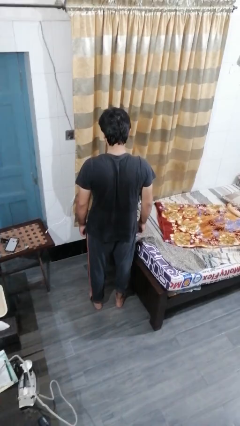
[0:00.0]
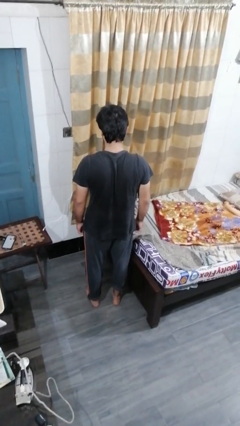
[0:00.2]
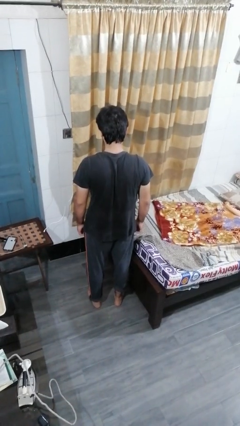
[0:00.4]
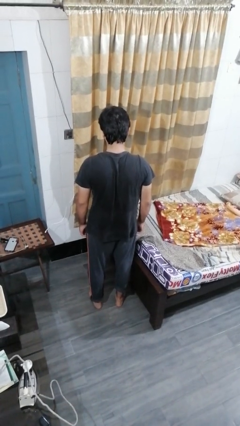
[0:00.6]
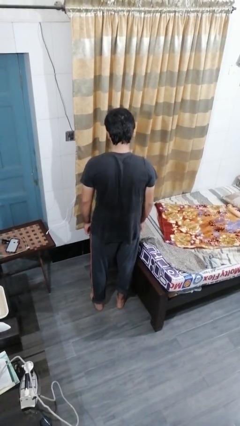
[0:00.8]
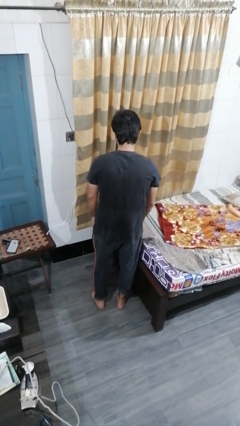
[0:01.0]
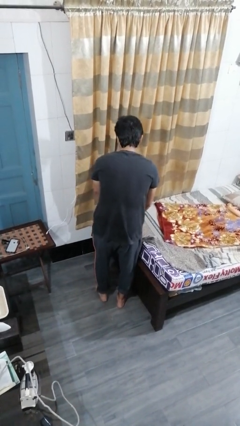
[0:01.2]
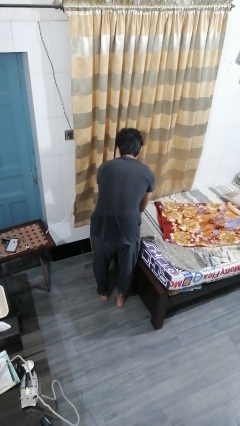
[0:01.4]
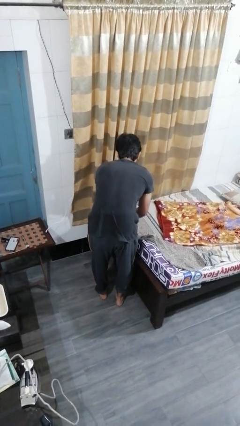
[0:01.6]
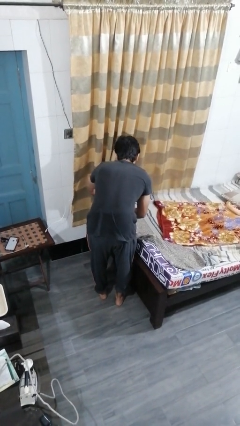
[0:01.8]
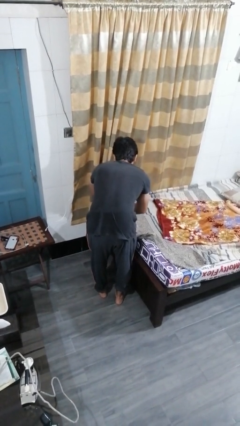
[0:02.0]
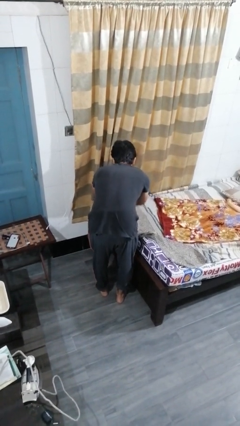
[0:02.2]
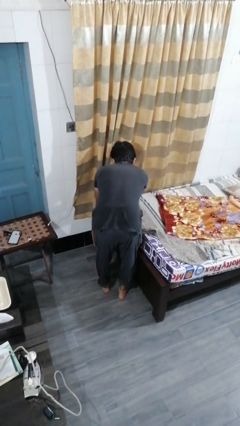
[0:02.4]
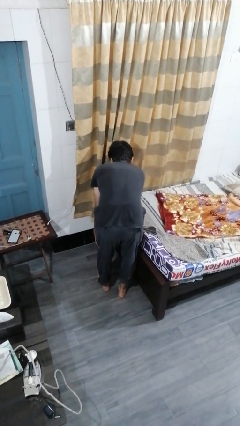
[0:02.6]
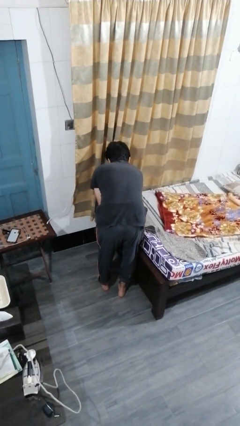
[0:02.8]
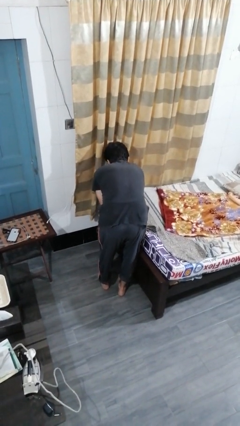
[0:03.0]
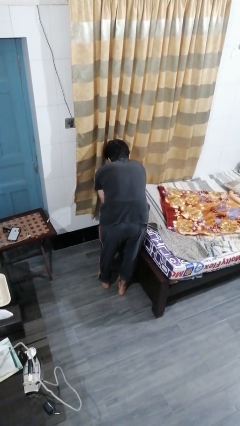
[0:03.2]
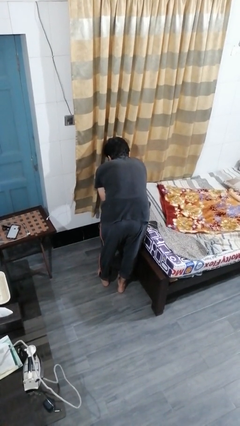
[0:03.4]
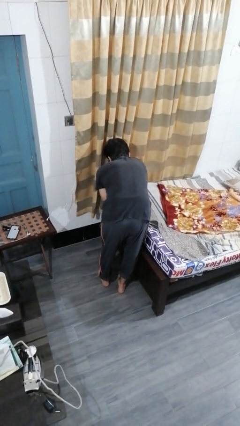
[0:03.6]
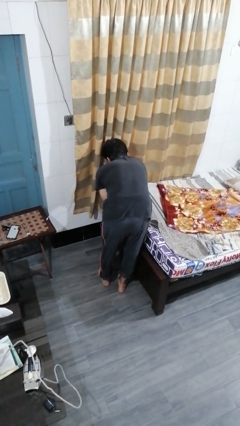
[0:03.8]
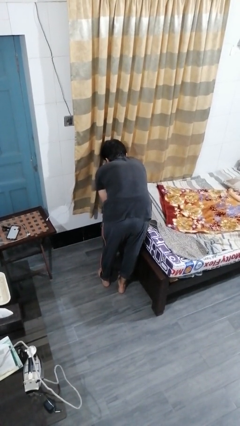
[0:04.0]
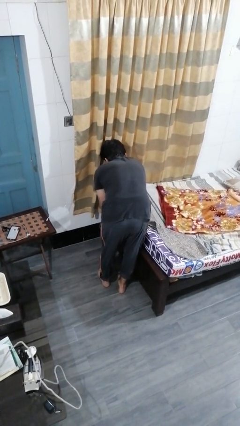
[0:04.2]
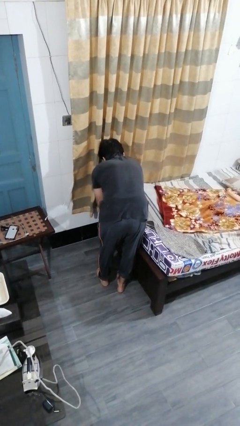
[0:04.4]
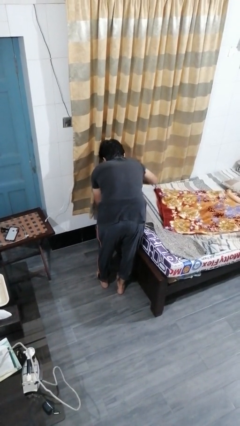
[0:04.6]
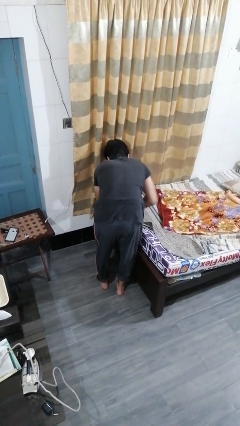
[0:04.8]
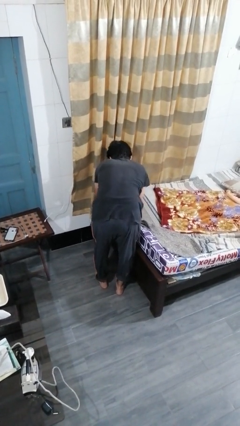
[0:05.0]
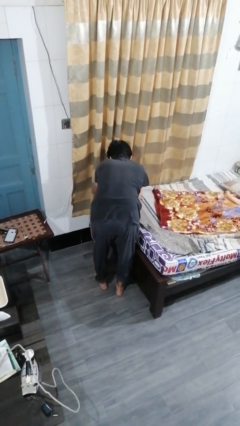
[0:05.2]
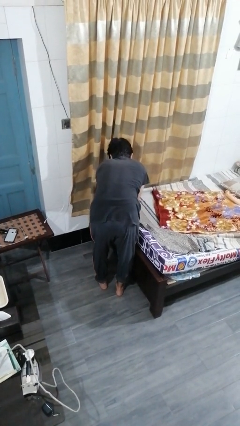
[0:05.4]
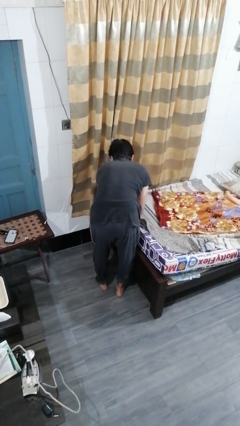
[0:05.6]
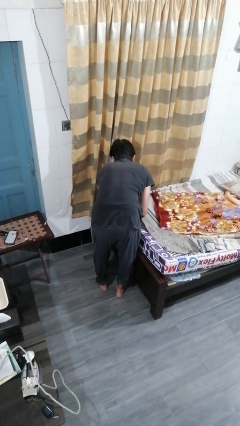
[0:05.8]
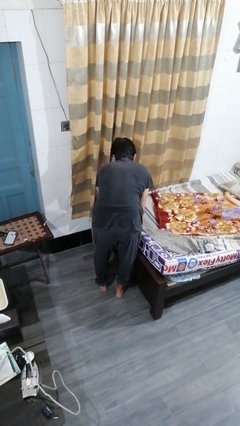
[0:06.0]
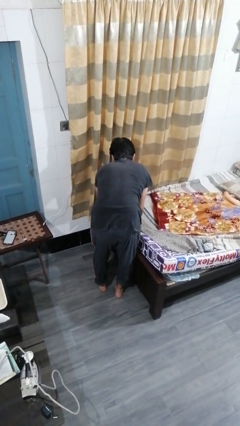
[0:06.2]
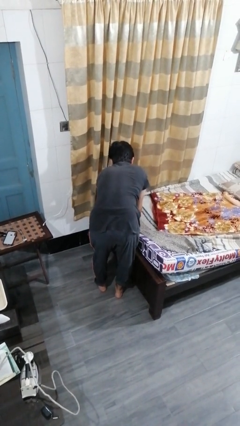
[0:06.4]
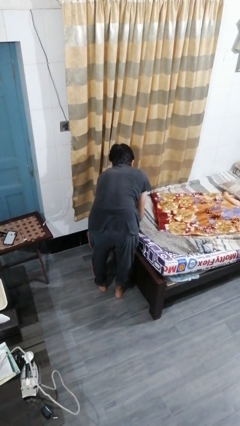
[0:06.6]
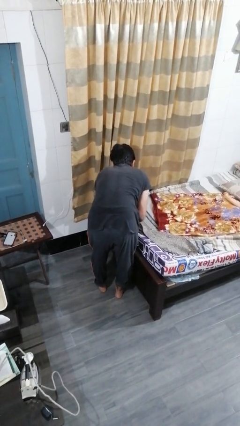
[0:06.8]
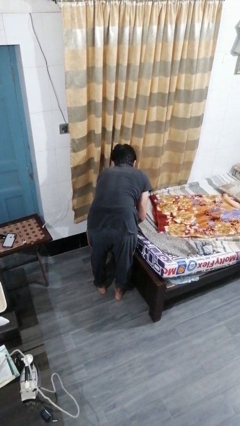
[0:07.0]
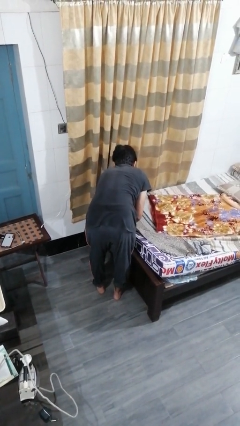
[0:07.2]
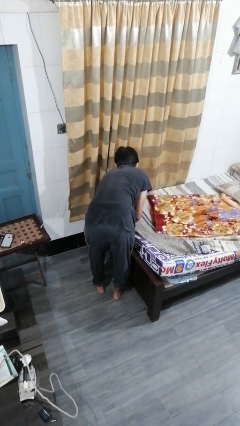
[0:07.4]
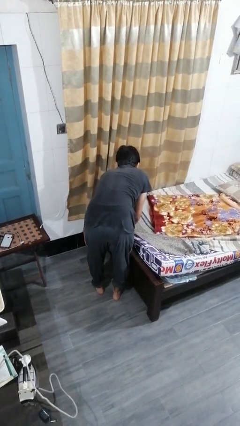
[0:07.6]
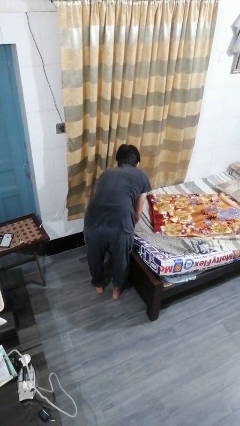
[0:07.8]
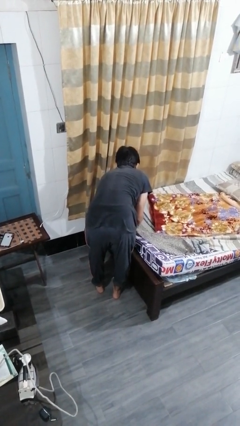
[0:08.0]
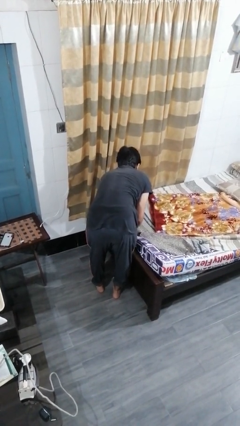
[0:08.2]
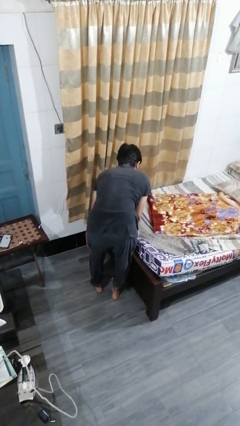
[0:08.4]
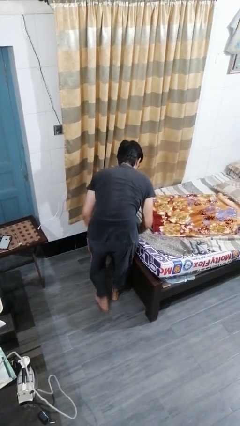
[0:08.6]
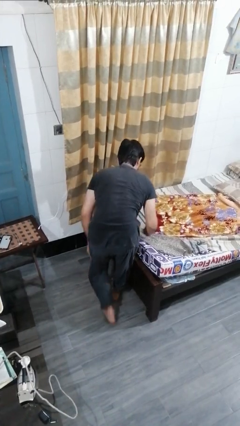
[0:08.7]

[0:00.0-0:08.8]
person makes bed

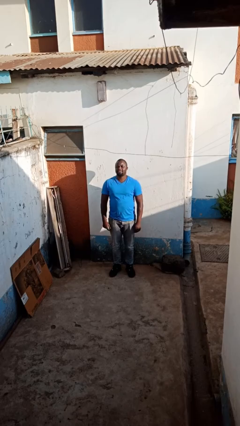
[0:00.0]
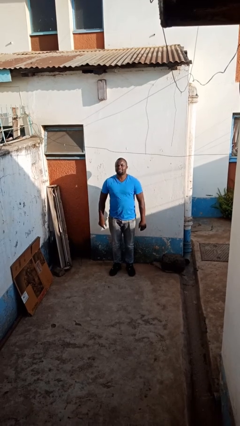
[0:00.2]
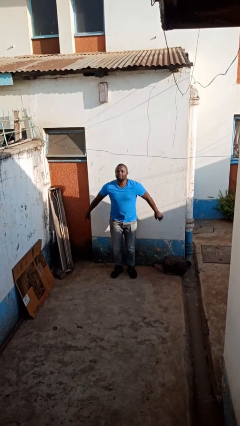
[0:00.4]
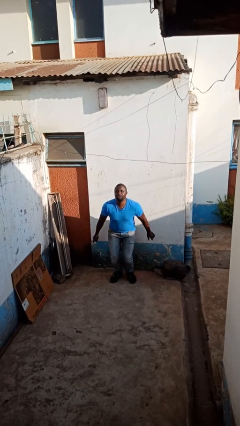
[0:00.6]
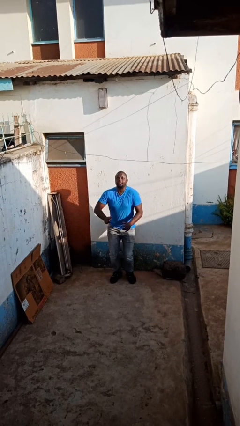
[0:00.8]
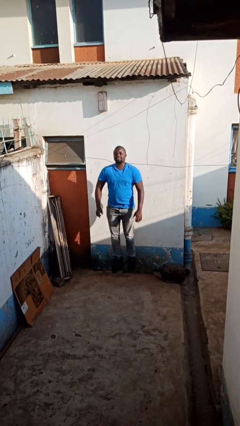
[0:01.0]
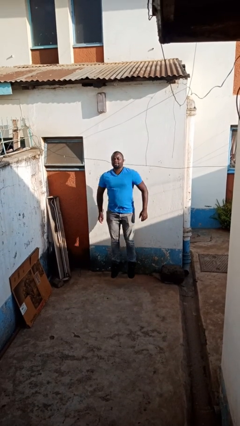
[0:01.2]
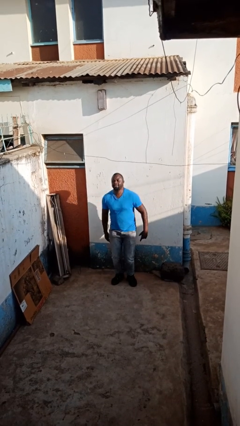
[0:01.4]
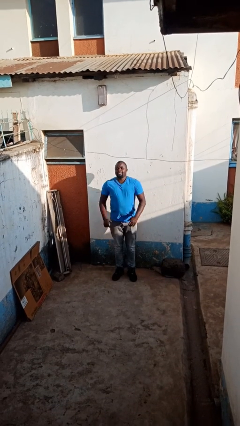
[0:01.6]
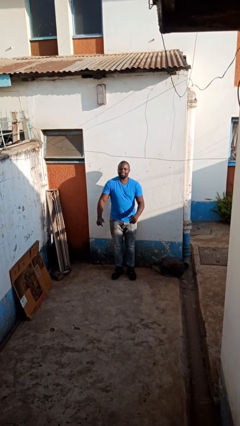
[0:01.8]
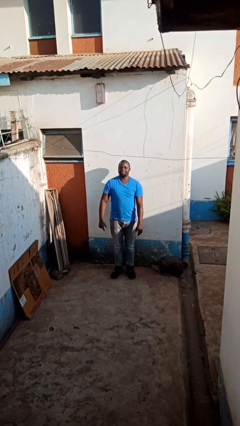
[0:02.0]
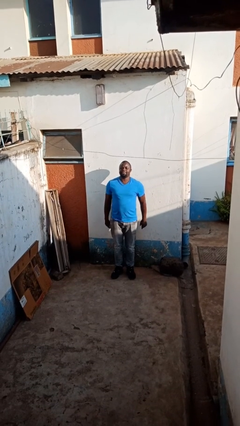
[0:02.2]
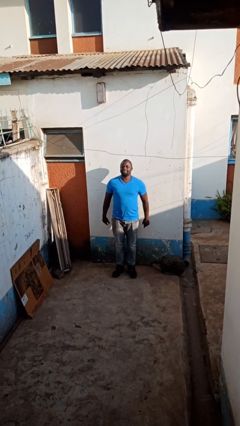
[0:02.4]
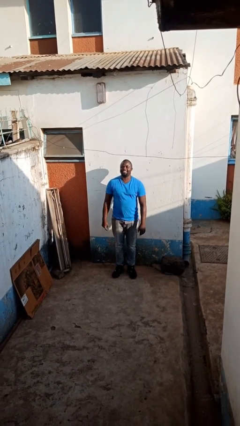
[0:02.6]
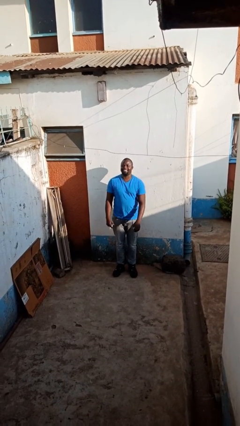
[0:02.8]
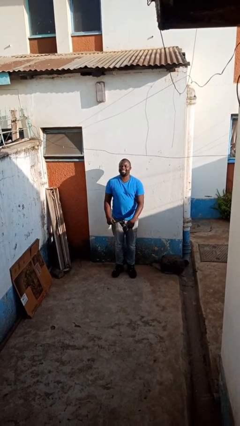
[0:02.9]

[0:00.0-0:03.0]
person jumps

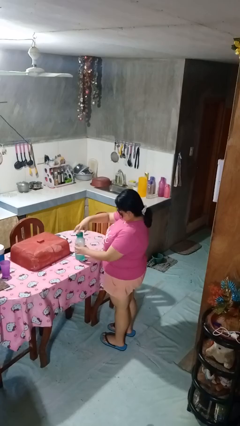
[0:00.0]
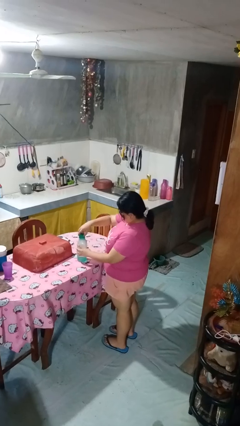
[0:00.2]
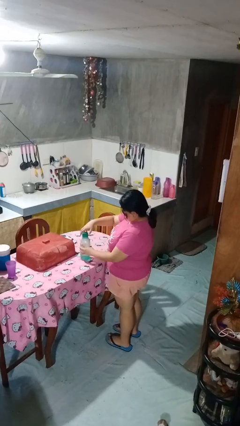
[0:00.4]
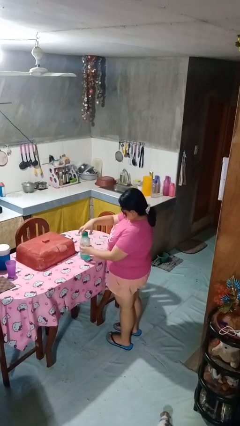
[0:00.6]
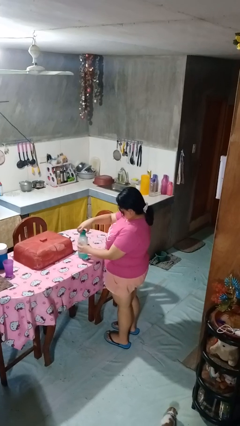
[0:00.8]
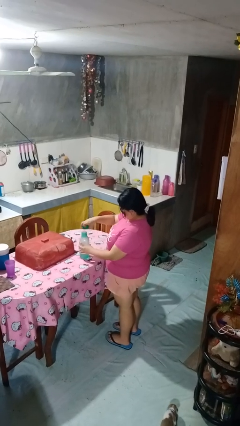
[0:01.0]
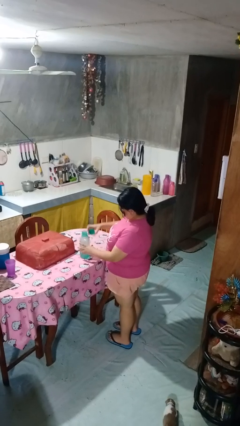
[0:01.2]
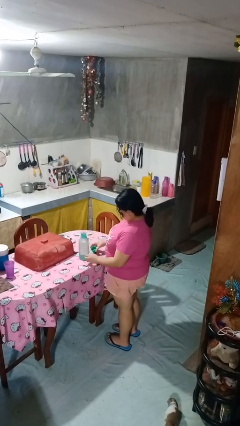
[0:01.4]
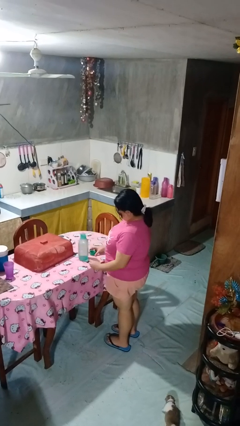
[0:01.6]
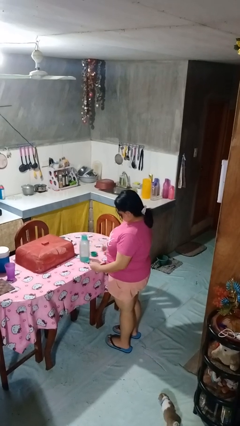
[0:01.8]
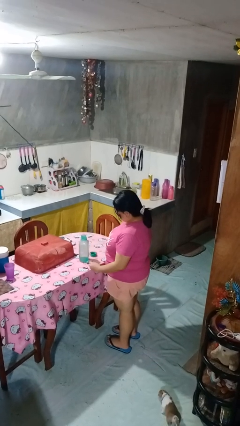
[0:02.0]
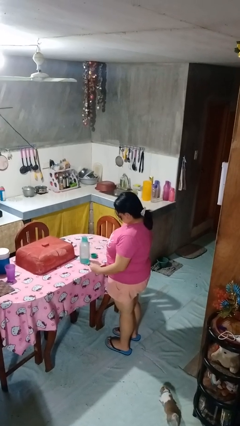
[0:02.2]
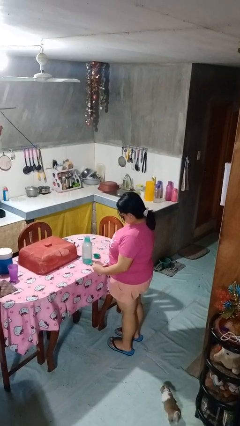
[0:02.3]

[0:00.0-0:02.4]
person unscrews lid from bottle

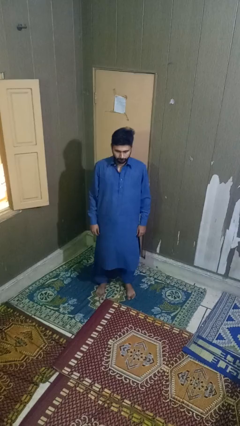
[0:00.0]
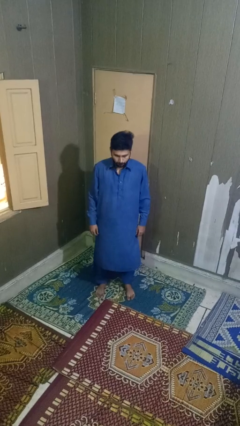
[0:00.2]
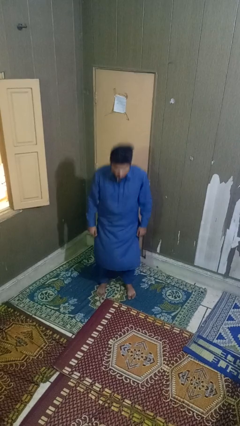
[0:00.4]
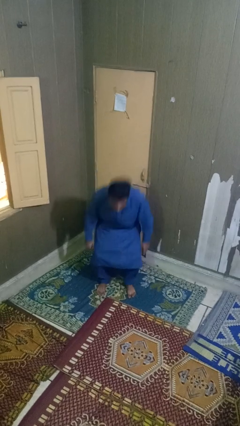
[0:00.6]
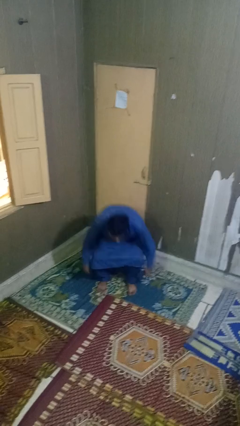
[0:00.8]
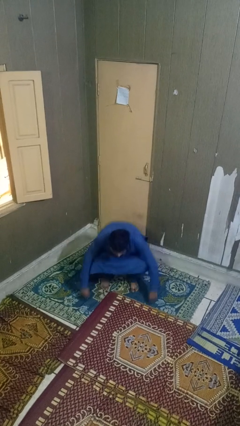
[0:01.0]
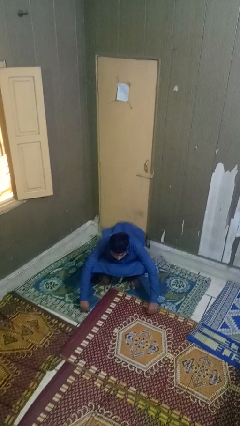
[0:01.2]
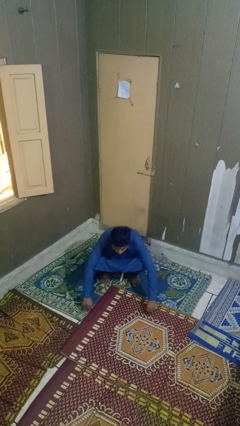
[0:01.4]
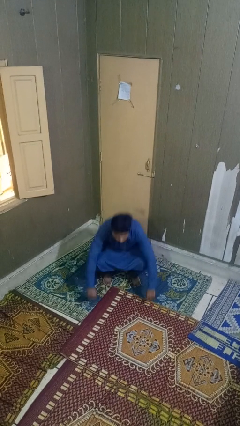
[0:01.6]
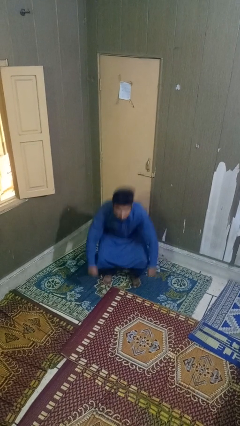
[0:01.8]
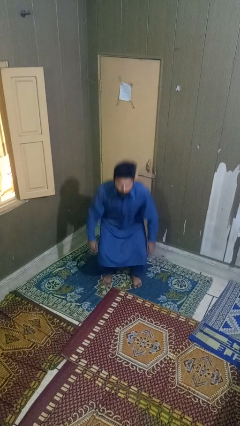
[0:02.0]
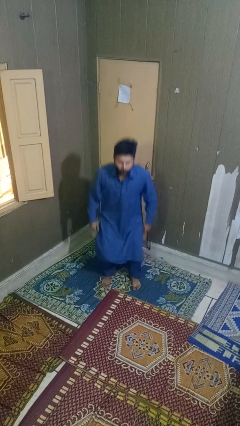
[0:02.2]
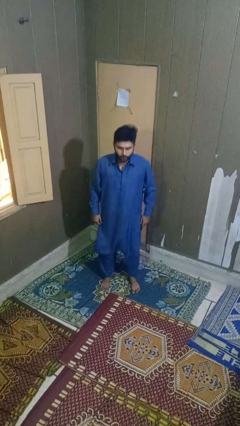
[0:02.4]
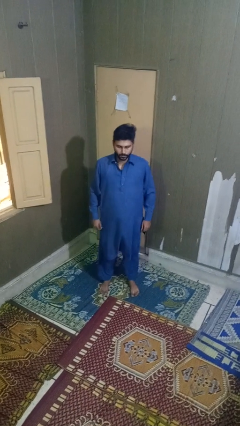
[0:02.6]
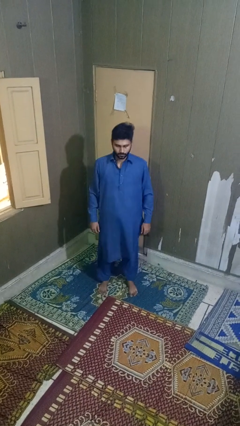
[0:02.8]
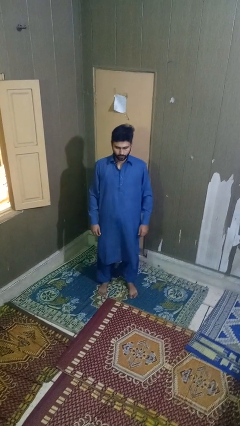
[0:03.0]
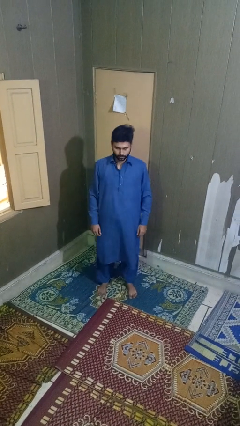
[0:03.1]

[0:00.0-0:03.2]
person exercises with situp

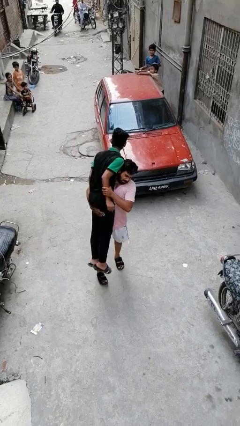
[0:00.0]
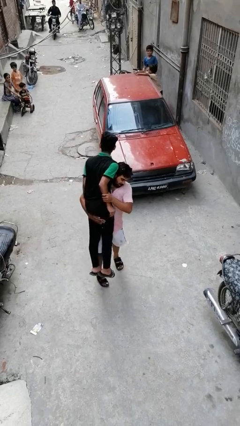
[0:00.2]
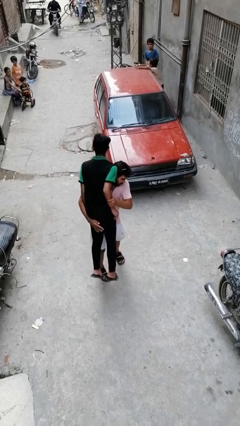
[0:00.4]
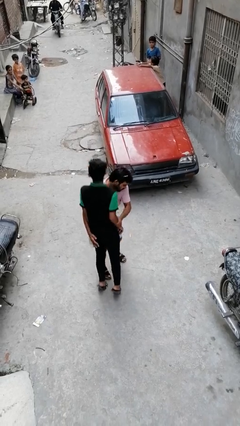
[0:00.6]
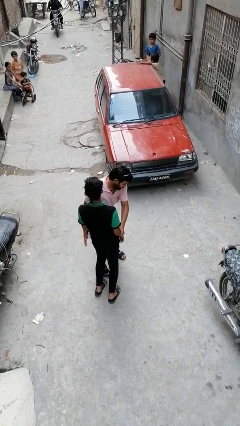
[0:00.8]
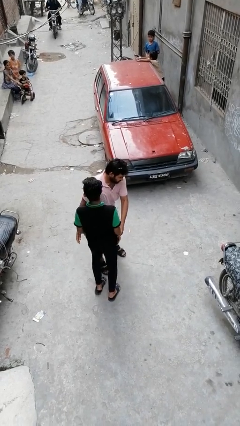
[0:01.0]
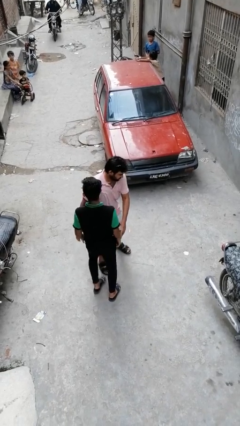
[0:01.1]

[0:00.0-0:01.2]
person puts down person
